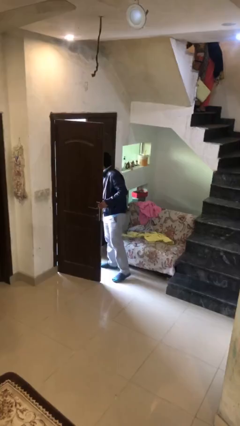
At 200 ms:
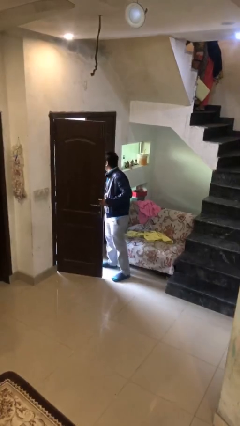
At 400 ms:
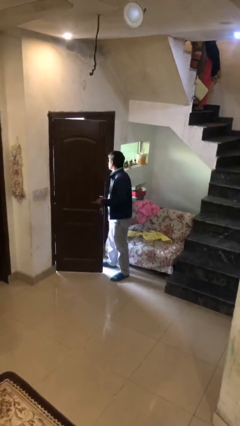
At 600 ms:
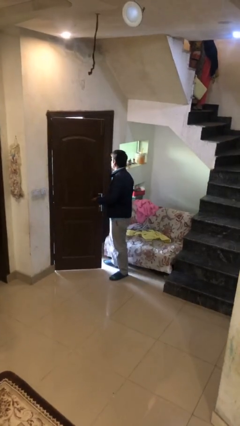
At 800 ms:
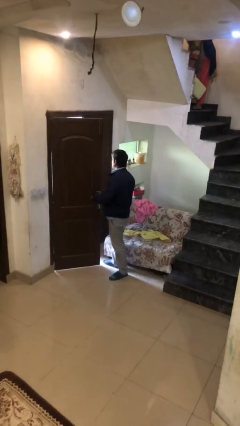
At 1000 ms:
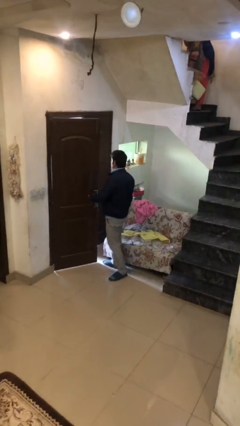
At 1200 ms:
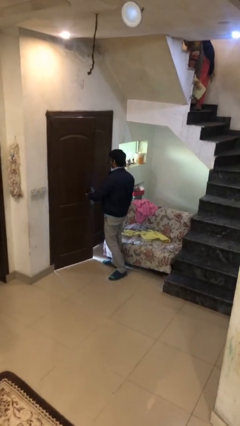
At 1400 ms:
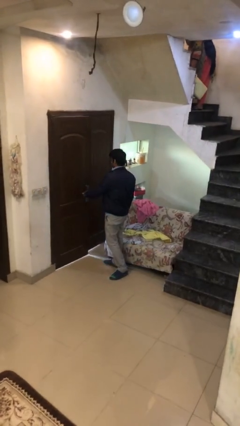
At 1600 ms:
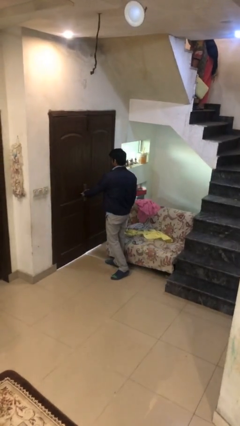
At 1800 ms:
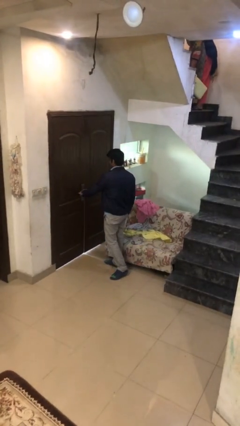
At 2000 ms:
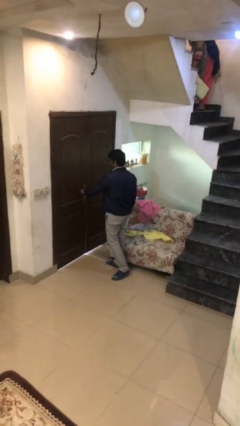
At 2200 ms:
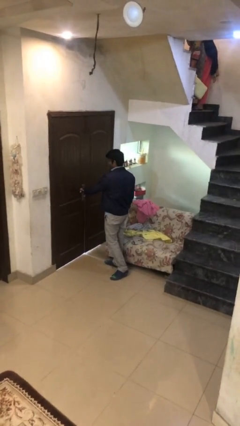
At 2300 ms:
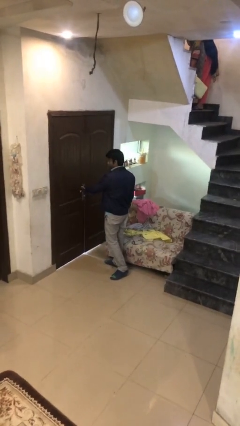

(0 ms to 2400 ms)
person closes facility door

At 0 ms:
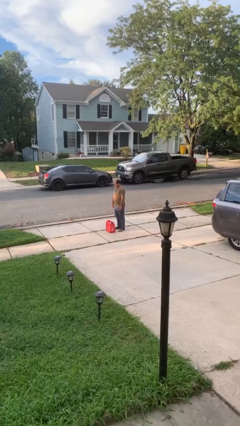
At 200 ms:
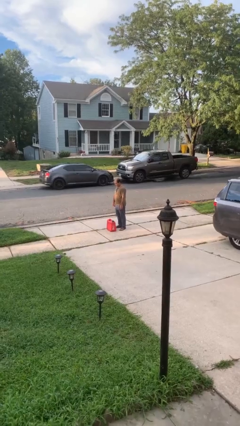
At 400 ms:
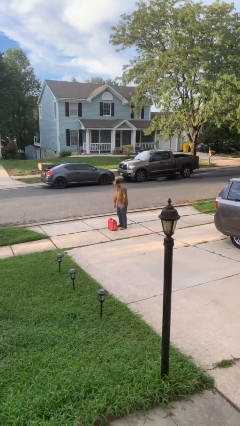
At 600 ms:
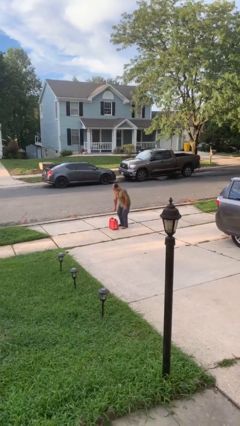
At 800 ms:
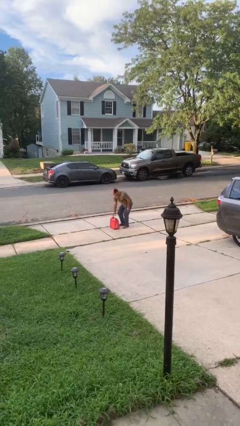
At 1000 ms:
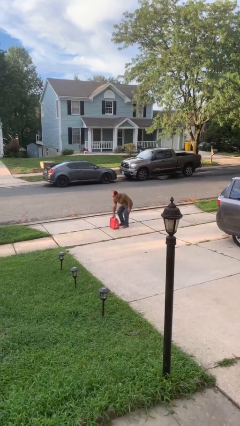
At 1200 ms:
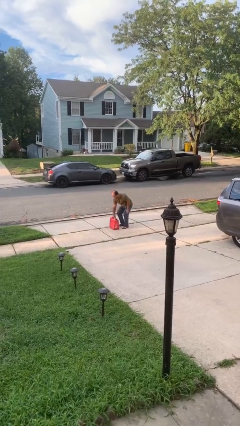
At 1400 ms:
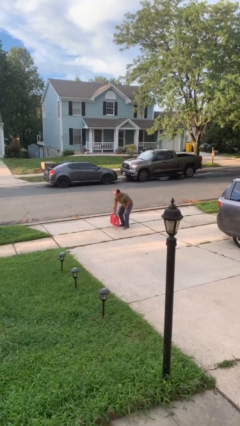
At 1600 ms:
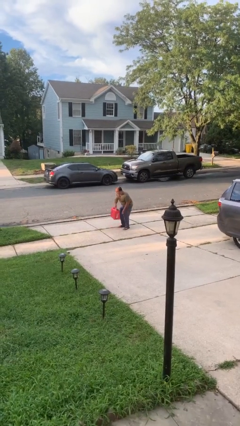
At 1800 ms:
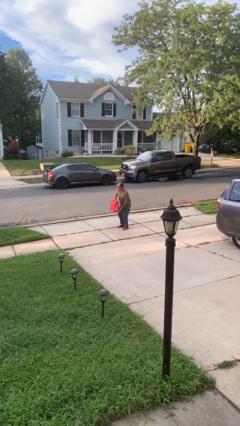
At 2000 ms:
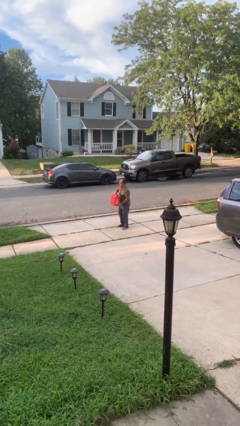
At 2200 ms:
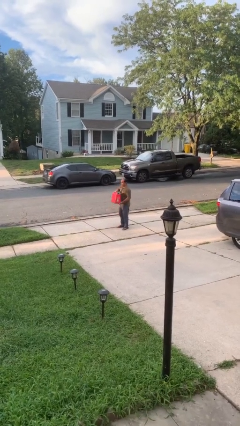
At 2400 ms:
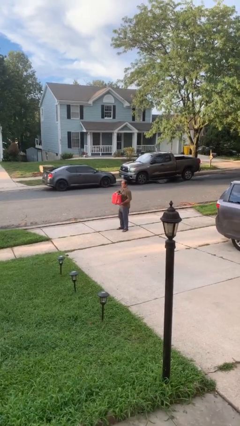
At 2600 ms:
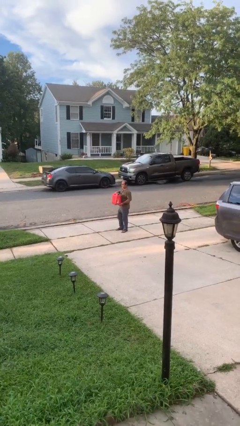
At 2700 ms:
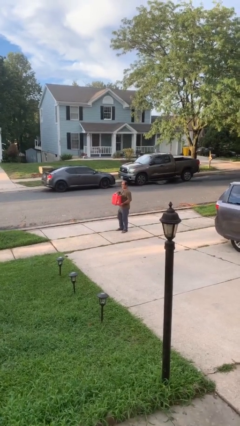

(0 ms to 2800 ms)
person picks up object from floor

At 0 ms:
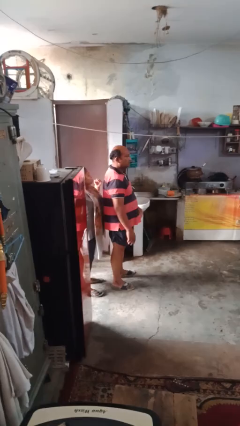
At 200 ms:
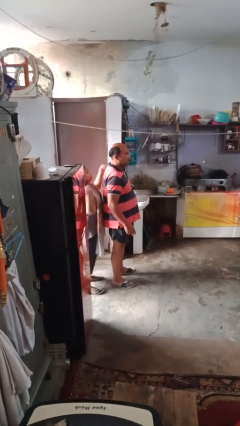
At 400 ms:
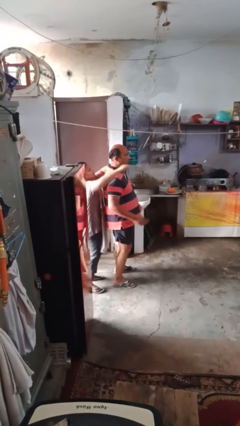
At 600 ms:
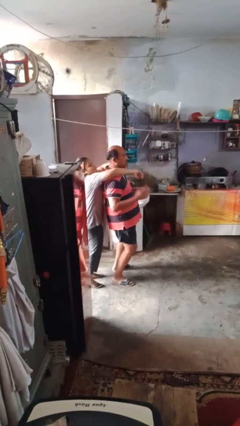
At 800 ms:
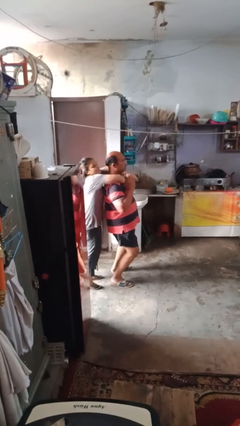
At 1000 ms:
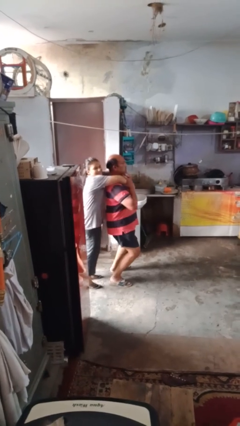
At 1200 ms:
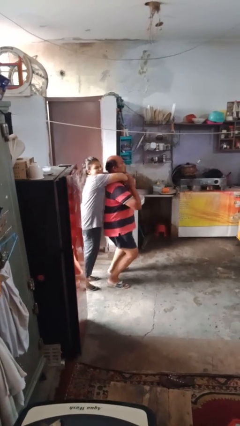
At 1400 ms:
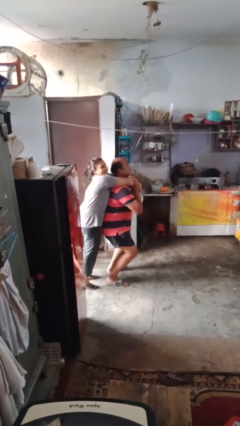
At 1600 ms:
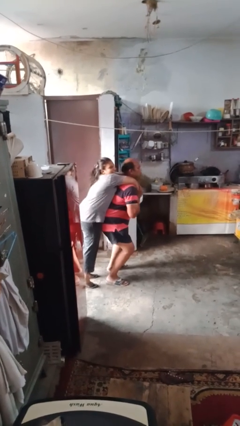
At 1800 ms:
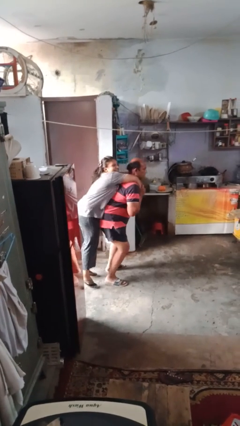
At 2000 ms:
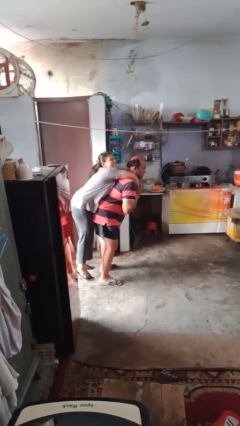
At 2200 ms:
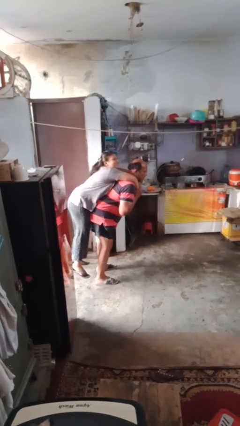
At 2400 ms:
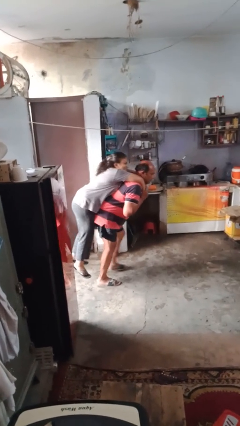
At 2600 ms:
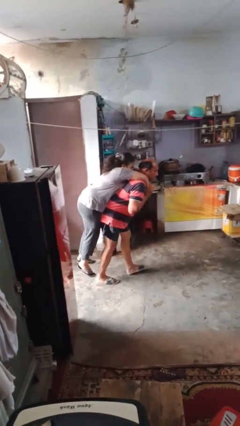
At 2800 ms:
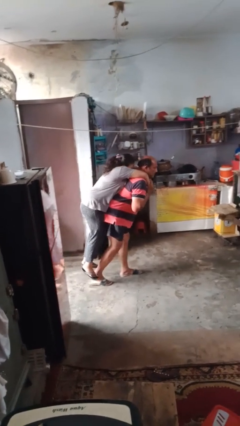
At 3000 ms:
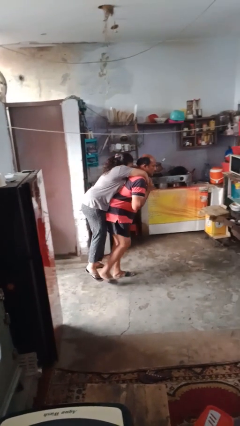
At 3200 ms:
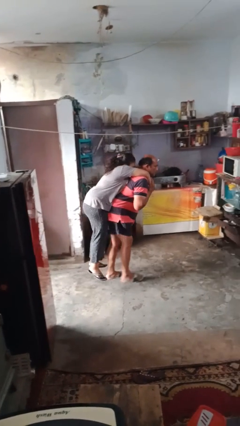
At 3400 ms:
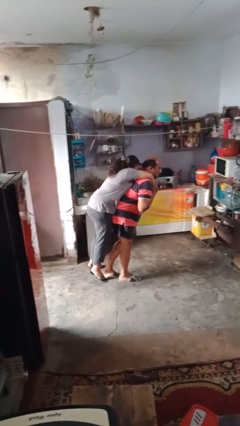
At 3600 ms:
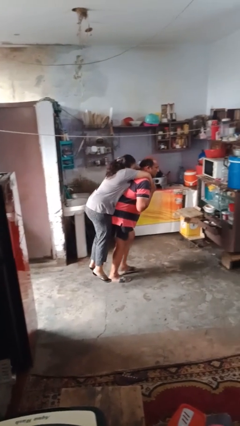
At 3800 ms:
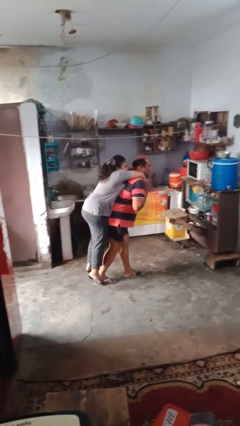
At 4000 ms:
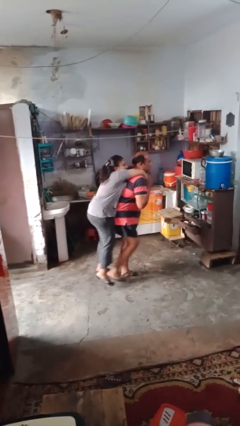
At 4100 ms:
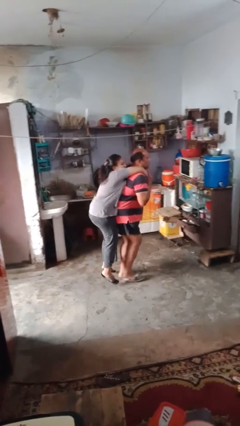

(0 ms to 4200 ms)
person carries person on back

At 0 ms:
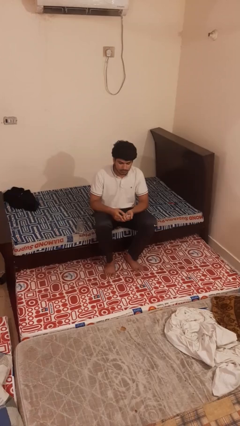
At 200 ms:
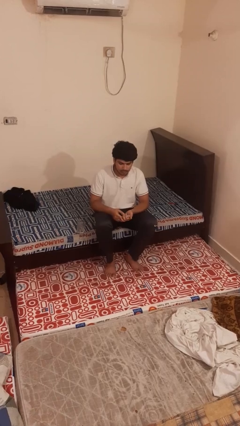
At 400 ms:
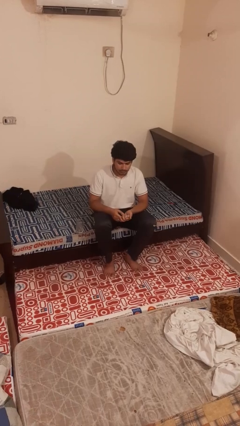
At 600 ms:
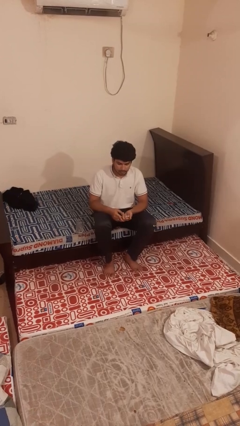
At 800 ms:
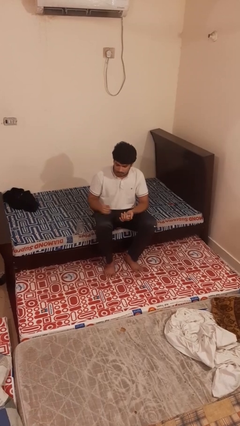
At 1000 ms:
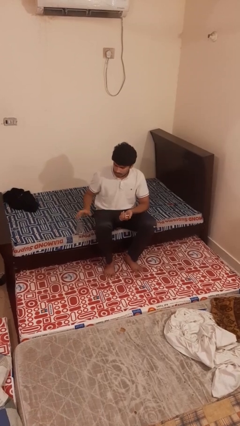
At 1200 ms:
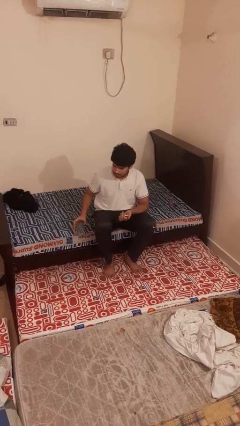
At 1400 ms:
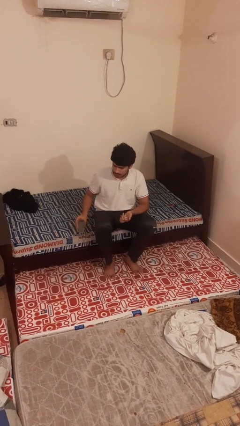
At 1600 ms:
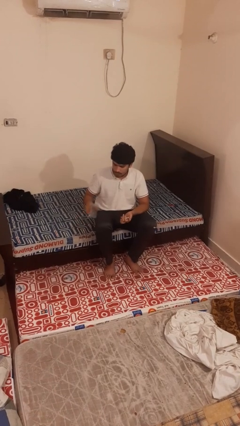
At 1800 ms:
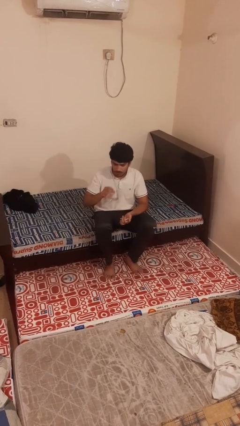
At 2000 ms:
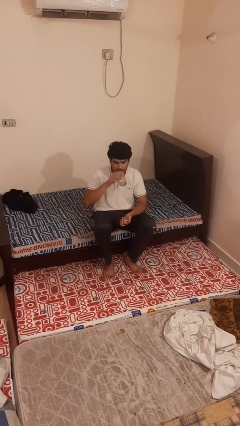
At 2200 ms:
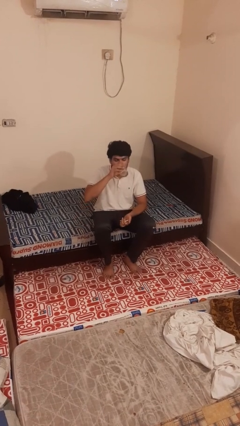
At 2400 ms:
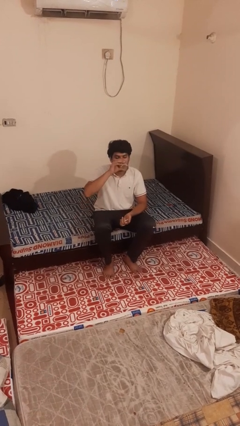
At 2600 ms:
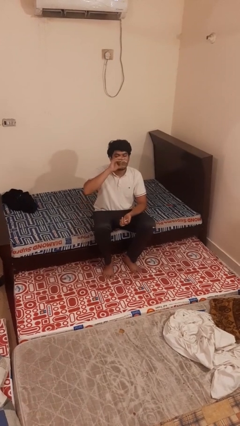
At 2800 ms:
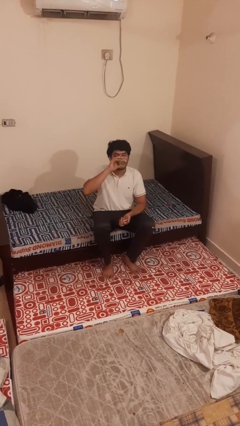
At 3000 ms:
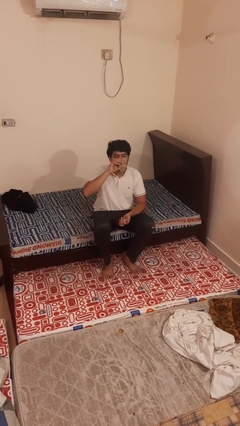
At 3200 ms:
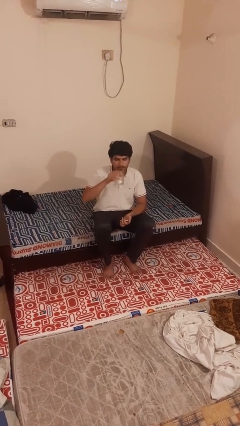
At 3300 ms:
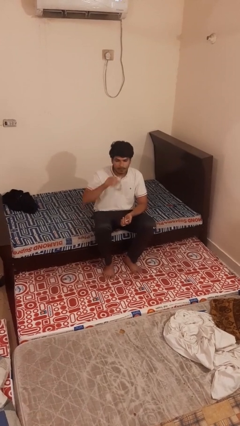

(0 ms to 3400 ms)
person drinks from cup

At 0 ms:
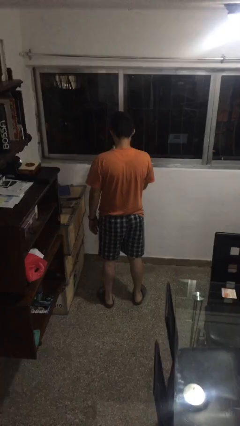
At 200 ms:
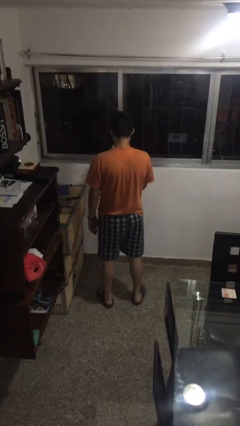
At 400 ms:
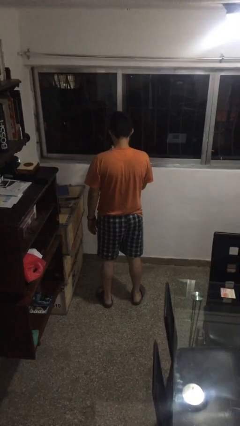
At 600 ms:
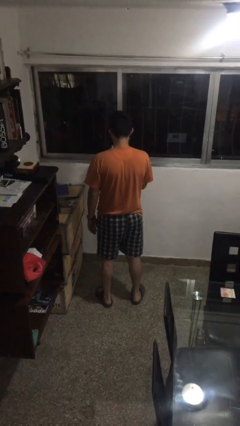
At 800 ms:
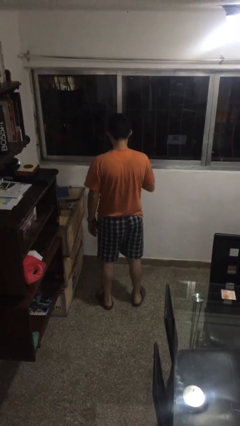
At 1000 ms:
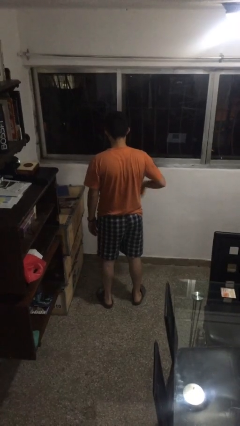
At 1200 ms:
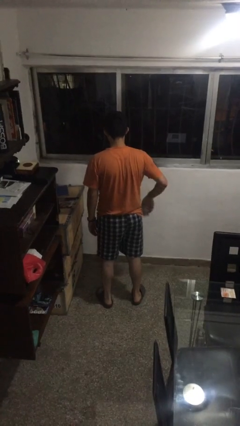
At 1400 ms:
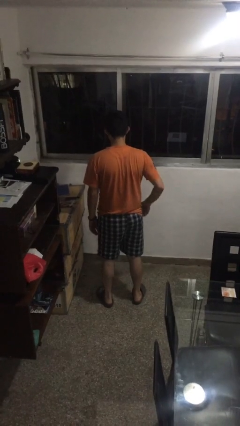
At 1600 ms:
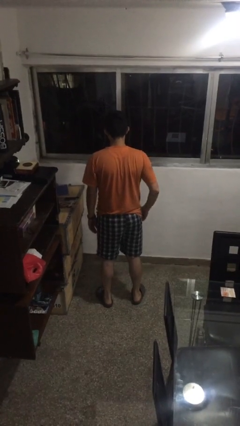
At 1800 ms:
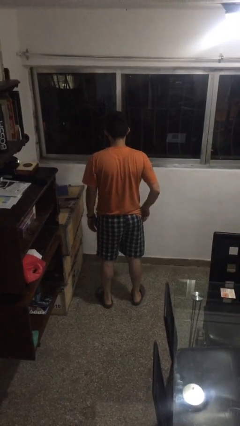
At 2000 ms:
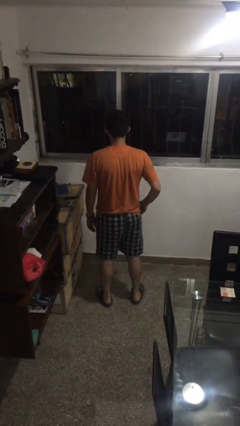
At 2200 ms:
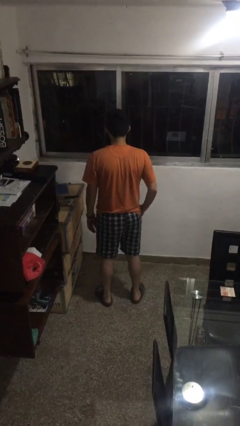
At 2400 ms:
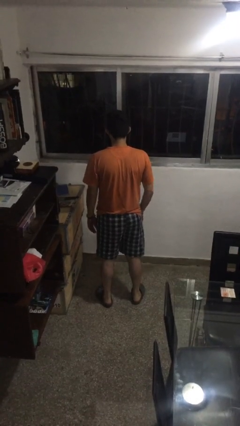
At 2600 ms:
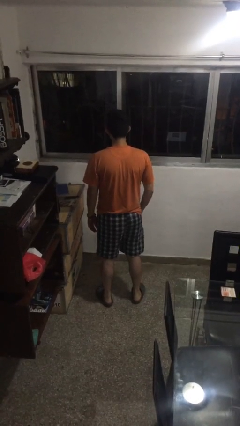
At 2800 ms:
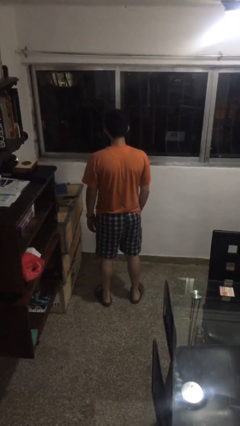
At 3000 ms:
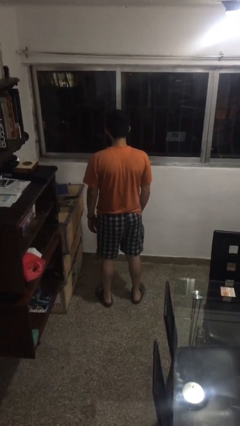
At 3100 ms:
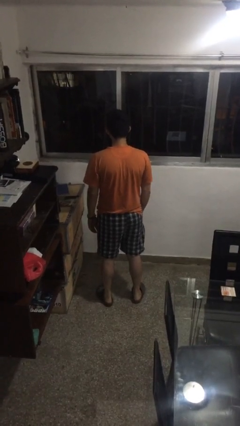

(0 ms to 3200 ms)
person puts phone into pocket

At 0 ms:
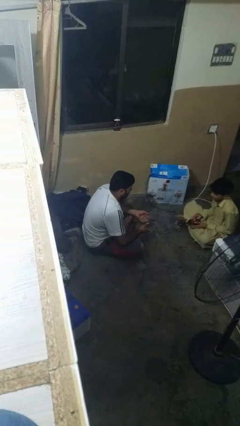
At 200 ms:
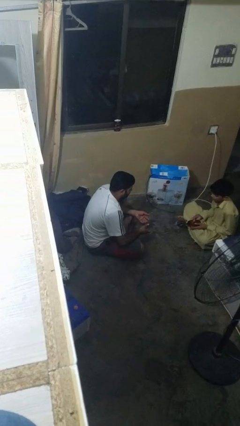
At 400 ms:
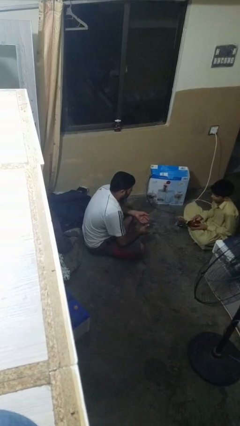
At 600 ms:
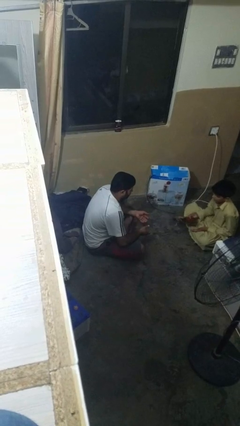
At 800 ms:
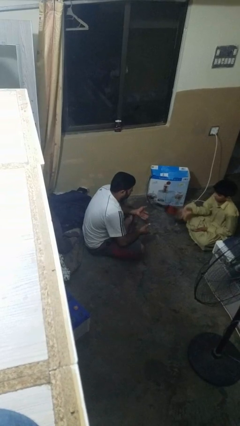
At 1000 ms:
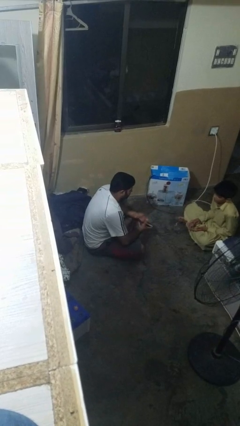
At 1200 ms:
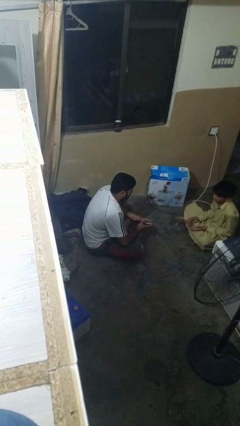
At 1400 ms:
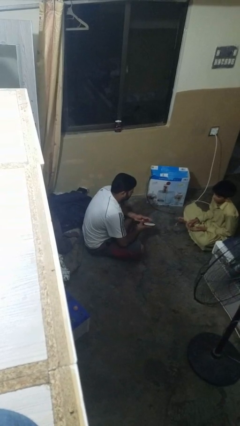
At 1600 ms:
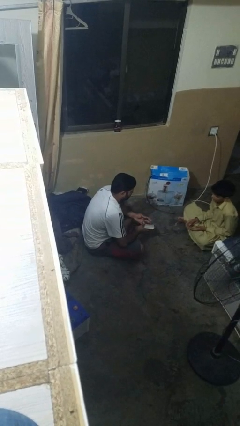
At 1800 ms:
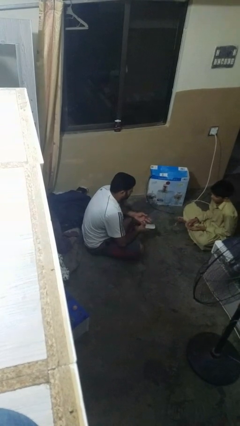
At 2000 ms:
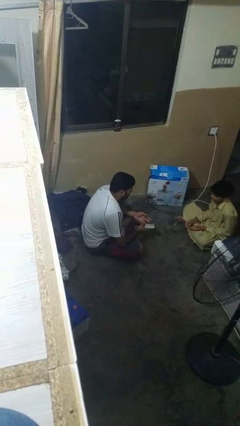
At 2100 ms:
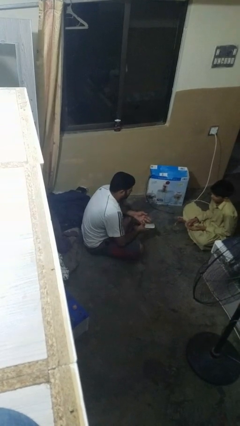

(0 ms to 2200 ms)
person catches object from person
